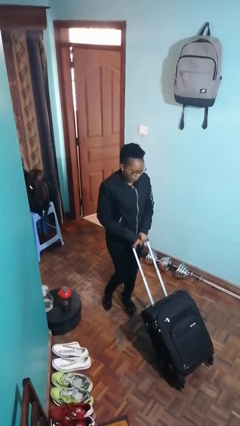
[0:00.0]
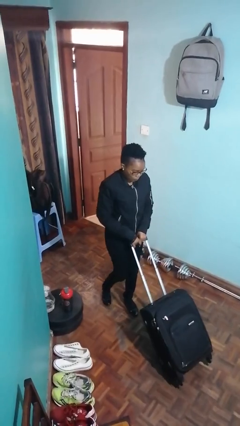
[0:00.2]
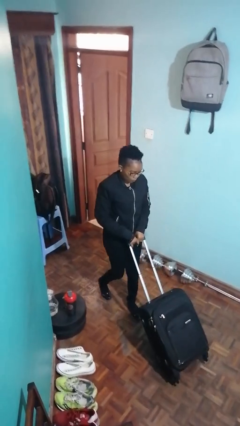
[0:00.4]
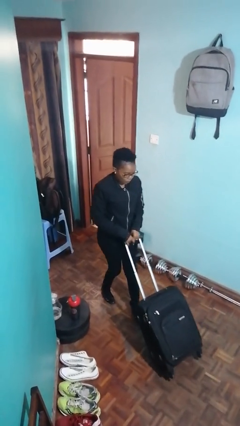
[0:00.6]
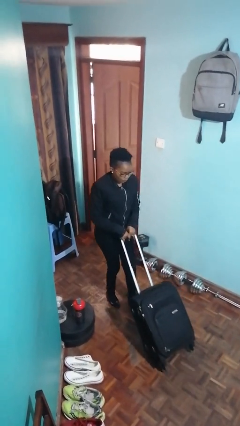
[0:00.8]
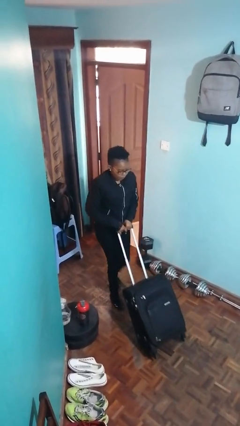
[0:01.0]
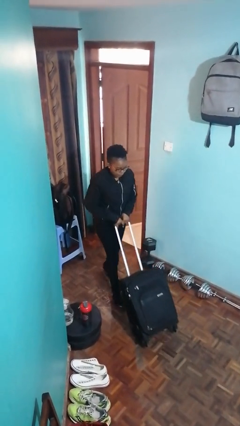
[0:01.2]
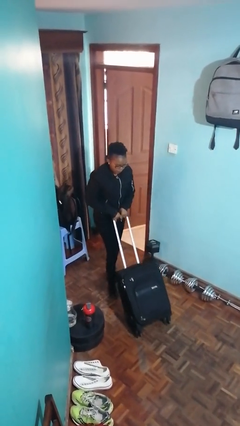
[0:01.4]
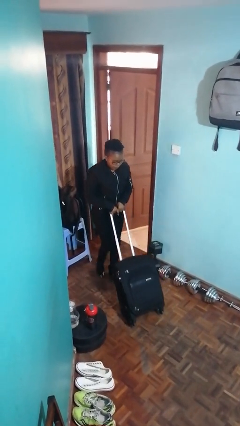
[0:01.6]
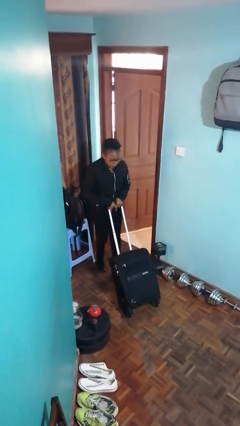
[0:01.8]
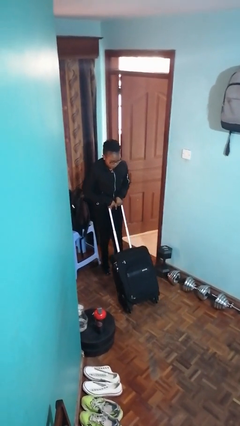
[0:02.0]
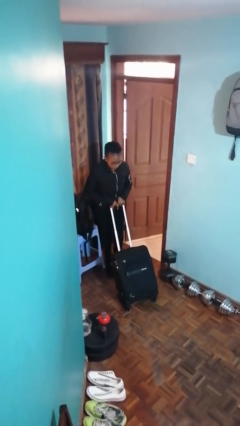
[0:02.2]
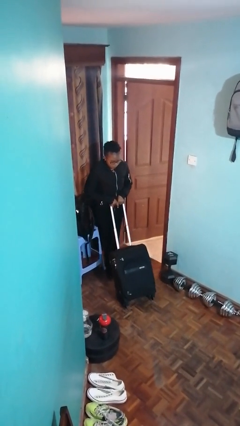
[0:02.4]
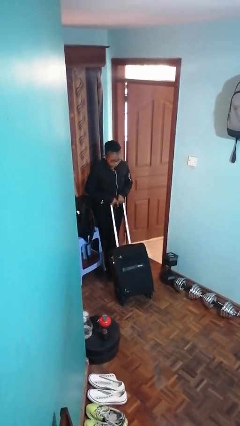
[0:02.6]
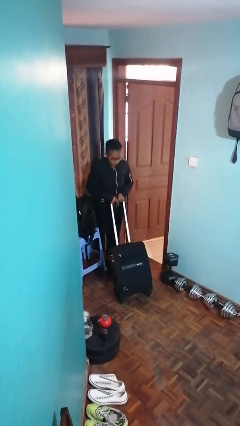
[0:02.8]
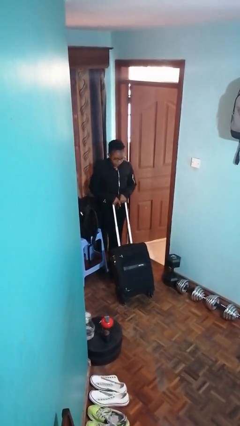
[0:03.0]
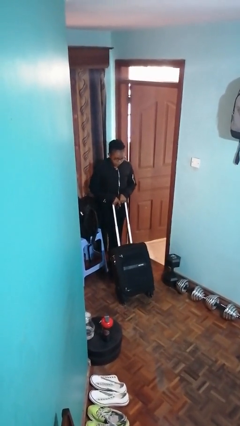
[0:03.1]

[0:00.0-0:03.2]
person pulls wheeled cart

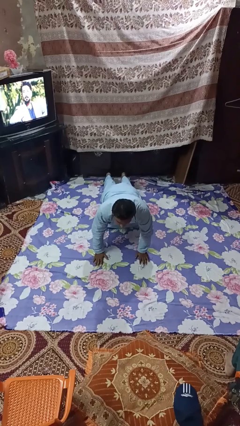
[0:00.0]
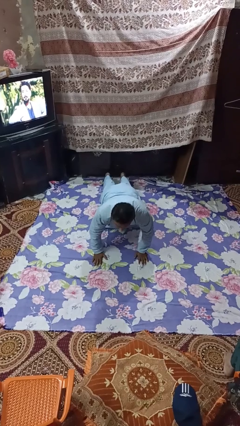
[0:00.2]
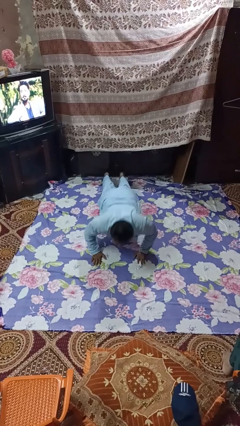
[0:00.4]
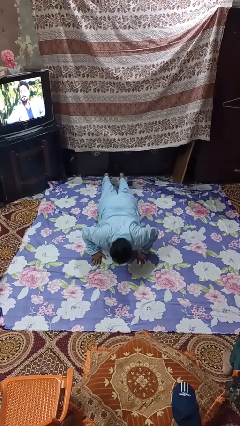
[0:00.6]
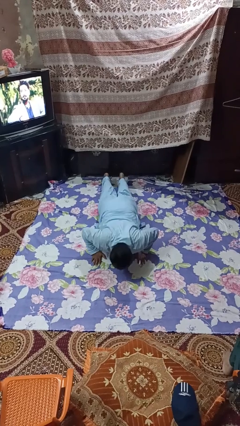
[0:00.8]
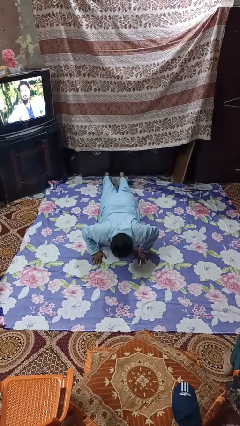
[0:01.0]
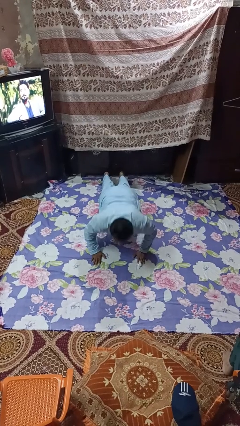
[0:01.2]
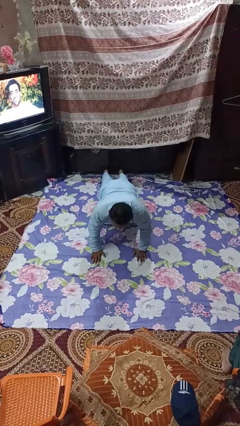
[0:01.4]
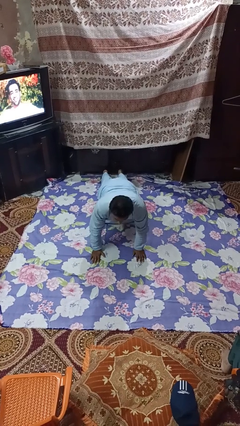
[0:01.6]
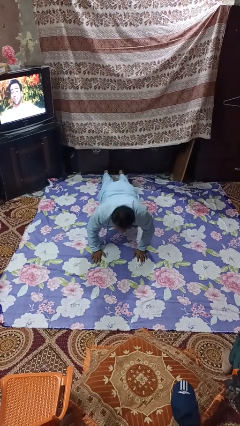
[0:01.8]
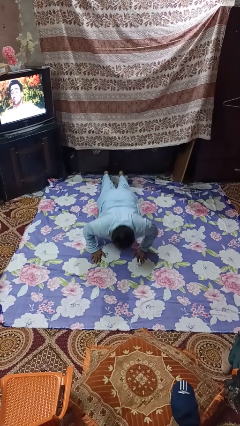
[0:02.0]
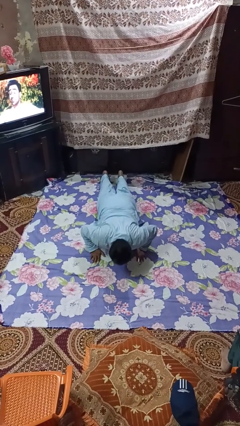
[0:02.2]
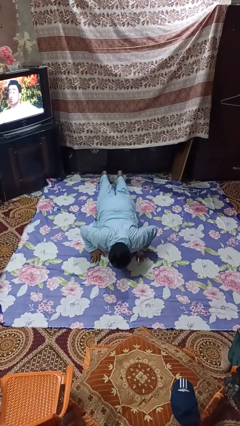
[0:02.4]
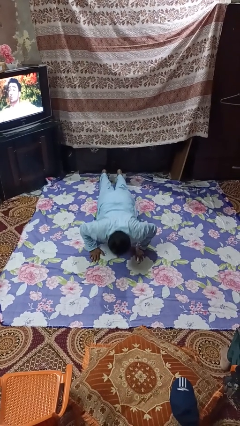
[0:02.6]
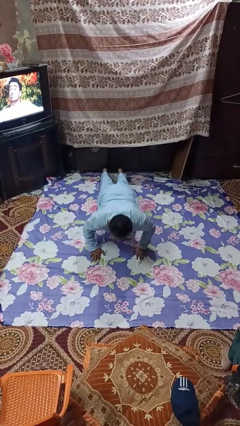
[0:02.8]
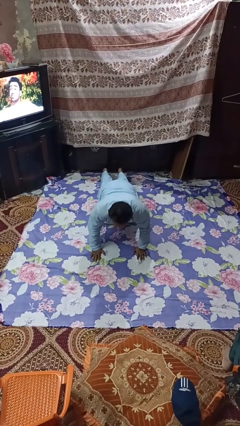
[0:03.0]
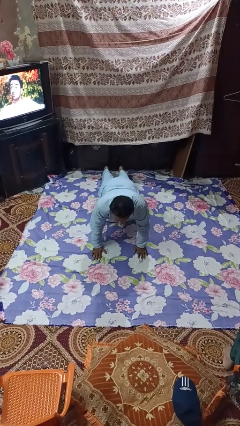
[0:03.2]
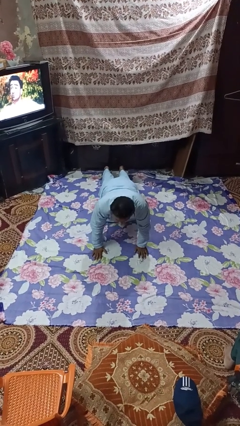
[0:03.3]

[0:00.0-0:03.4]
person exercises with pushup

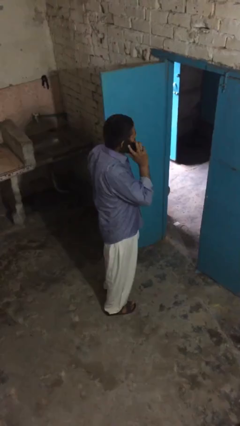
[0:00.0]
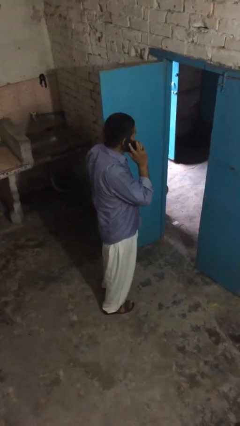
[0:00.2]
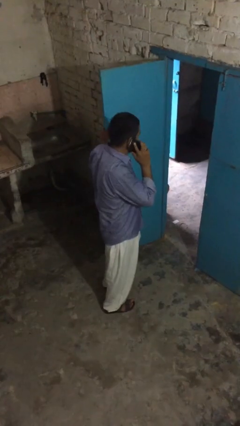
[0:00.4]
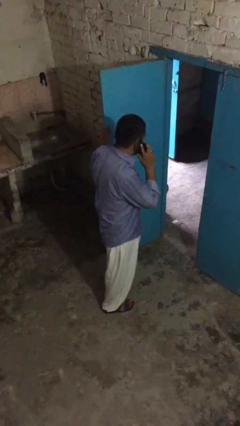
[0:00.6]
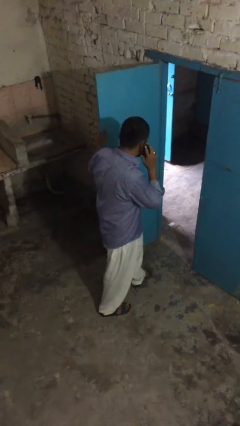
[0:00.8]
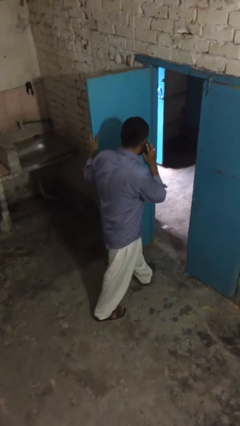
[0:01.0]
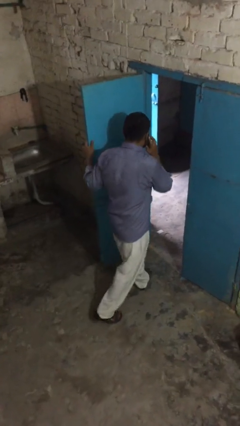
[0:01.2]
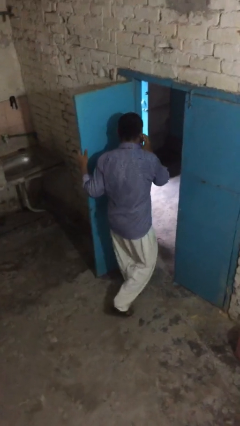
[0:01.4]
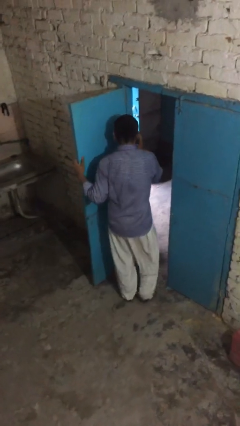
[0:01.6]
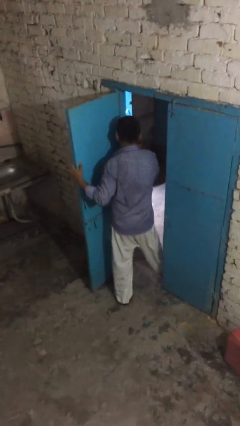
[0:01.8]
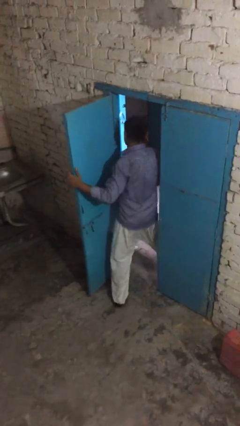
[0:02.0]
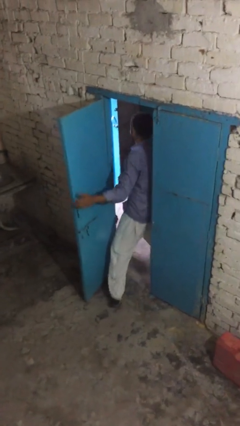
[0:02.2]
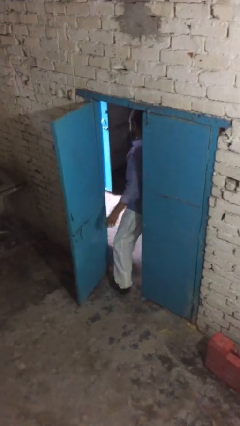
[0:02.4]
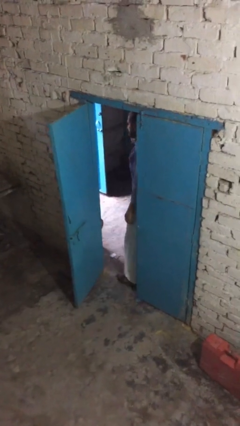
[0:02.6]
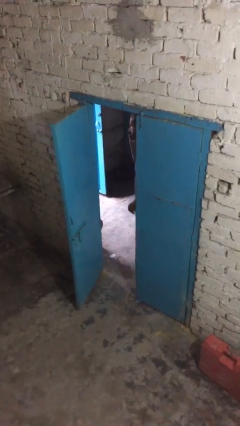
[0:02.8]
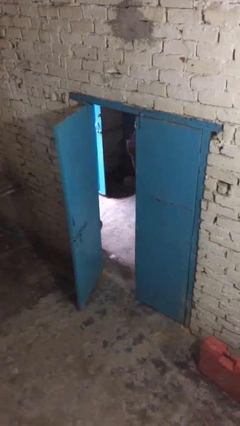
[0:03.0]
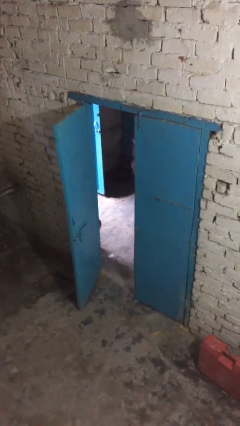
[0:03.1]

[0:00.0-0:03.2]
person exits scene through structure

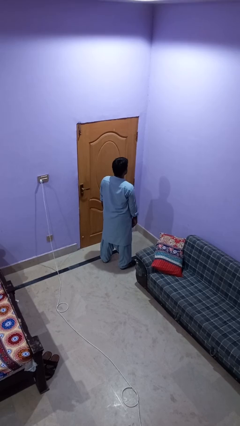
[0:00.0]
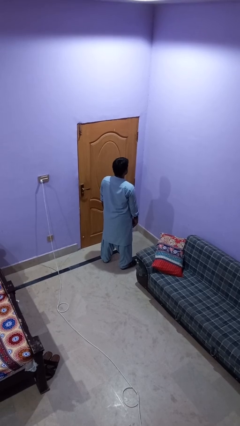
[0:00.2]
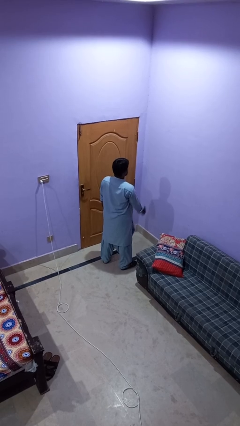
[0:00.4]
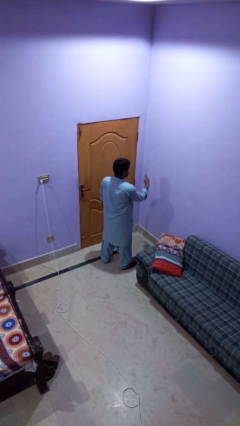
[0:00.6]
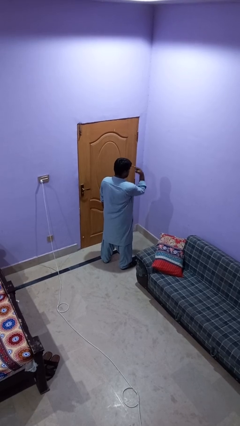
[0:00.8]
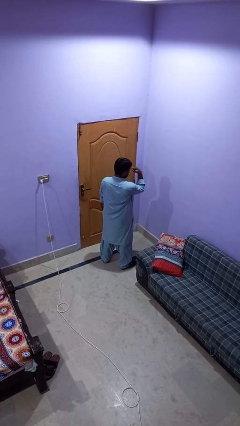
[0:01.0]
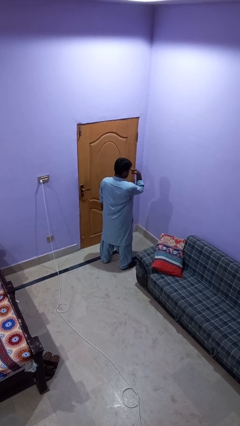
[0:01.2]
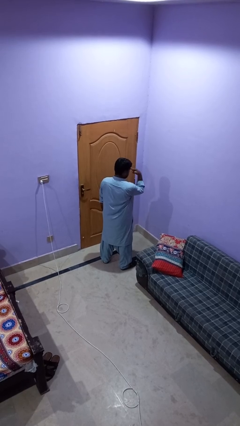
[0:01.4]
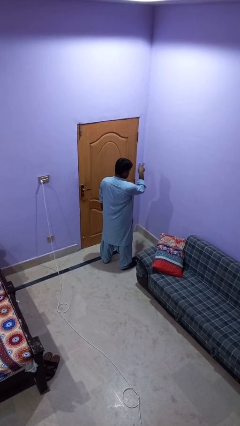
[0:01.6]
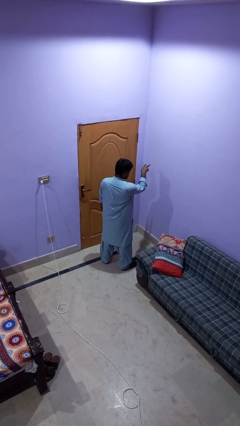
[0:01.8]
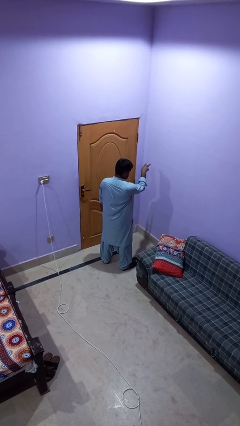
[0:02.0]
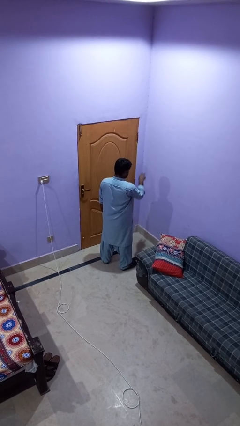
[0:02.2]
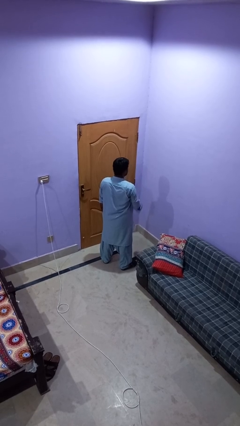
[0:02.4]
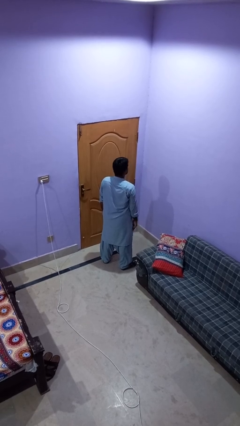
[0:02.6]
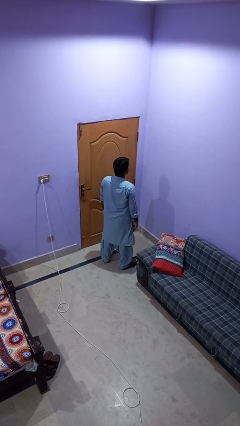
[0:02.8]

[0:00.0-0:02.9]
person gestures watch closely

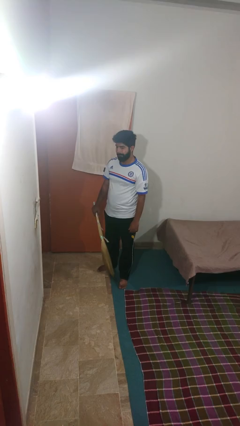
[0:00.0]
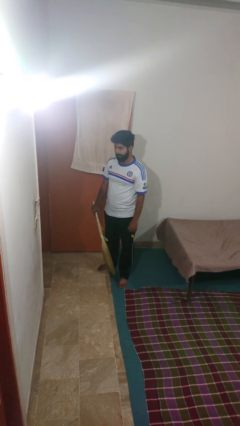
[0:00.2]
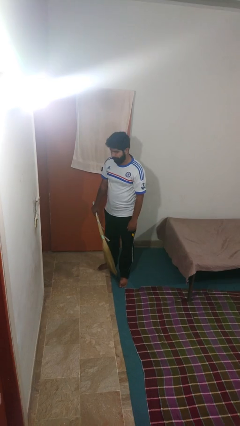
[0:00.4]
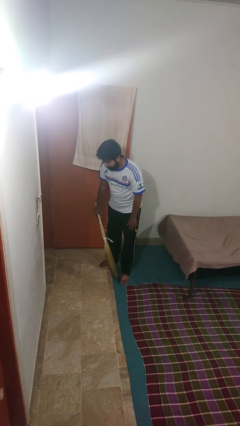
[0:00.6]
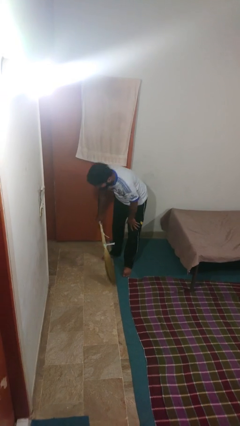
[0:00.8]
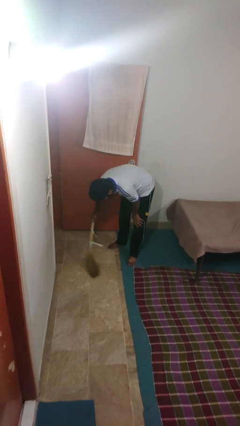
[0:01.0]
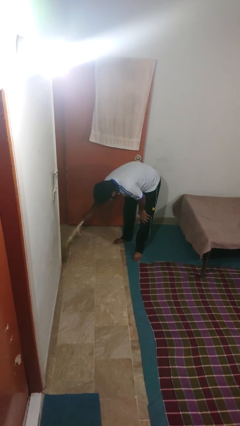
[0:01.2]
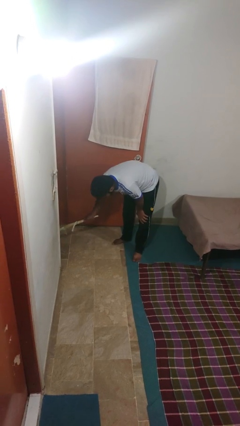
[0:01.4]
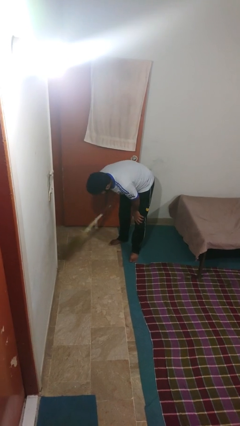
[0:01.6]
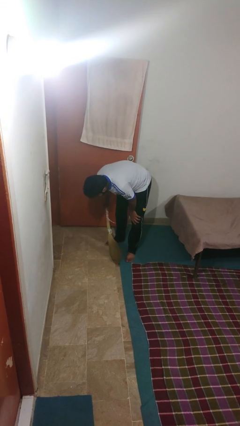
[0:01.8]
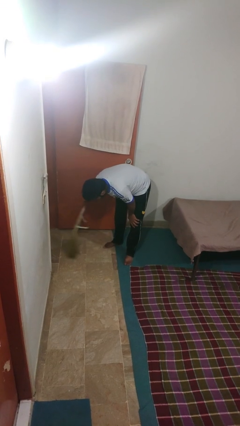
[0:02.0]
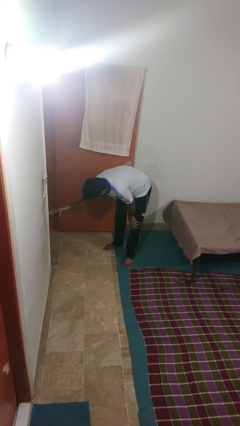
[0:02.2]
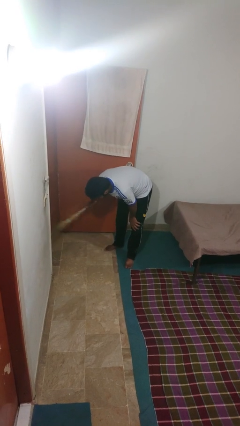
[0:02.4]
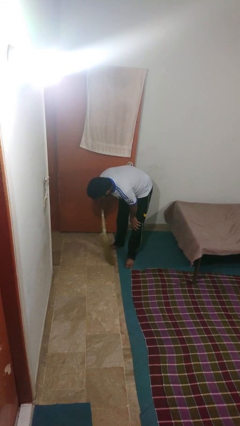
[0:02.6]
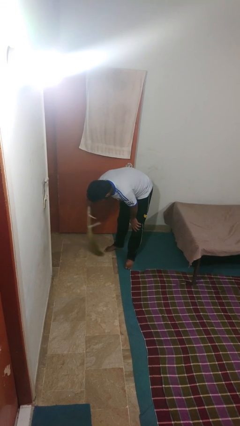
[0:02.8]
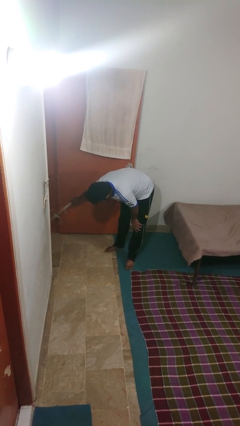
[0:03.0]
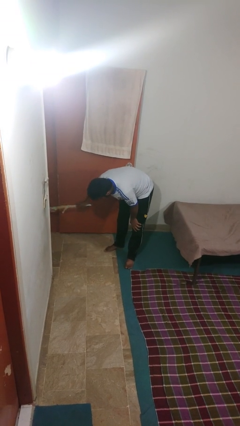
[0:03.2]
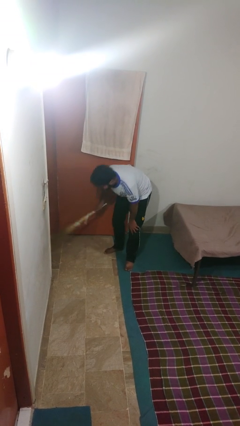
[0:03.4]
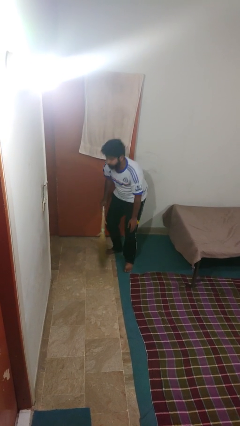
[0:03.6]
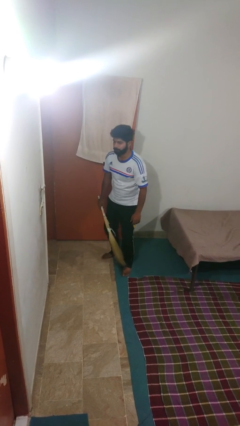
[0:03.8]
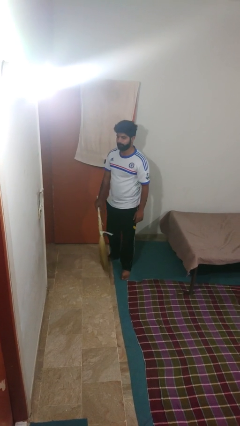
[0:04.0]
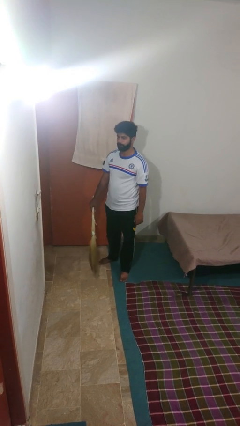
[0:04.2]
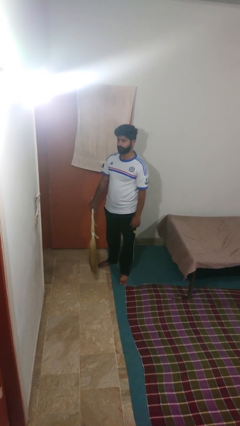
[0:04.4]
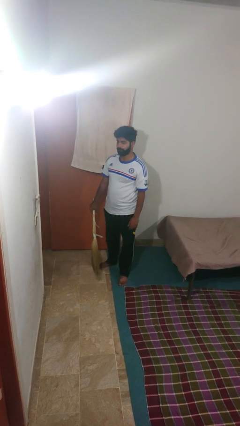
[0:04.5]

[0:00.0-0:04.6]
person sweeps floor

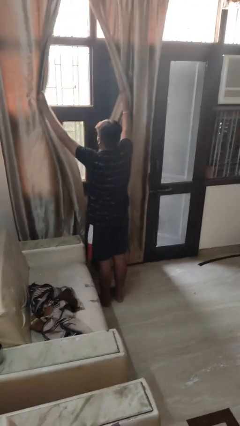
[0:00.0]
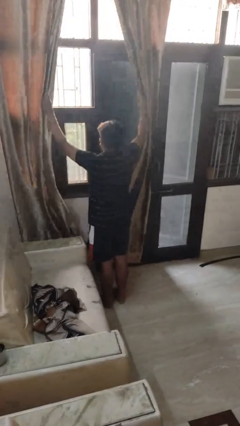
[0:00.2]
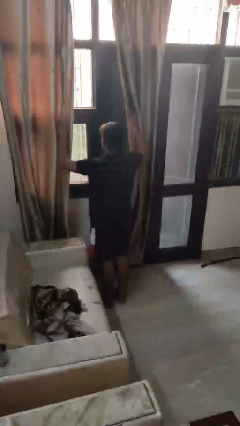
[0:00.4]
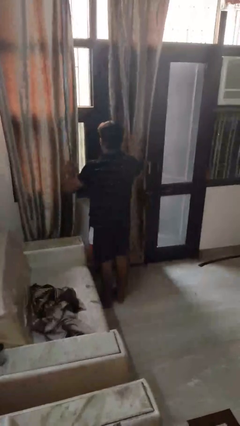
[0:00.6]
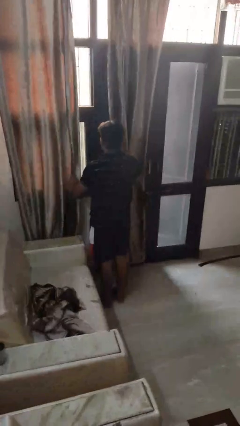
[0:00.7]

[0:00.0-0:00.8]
person opens curtains
